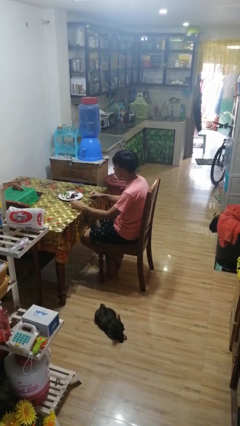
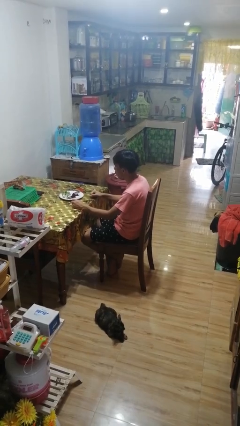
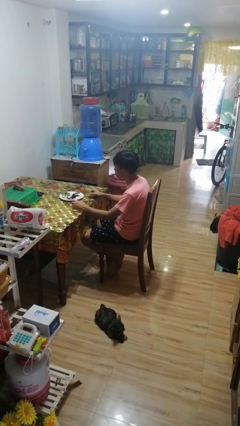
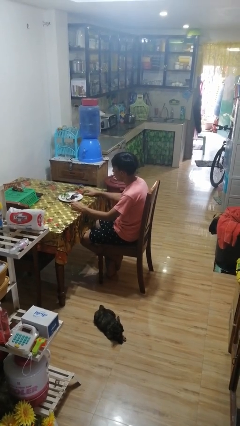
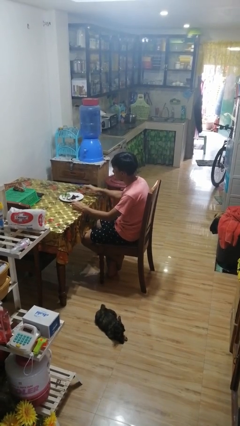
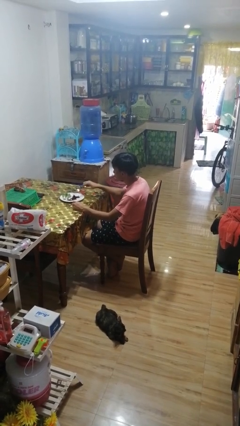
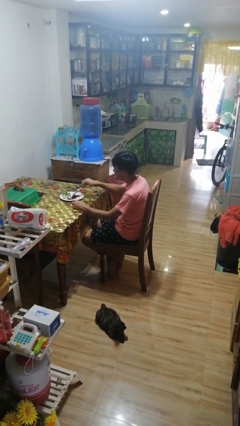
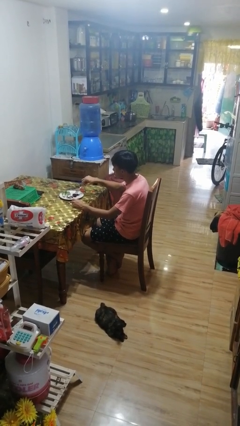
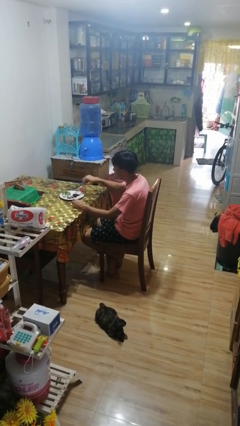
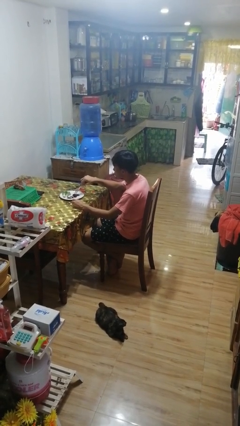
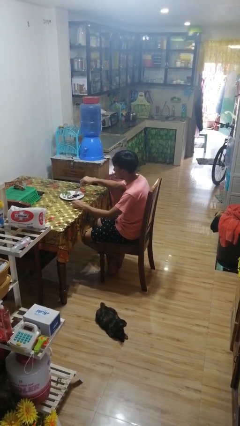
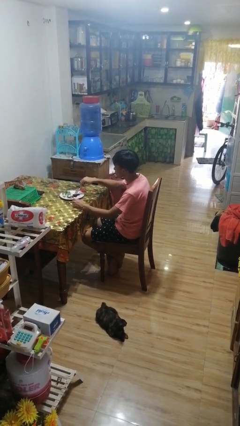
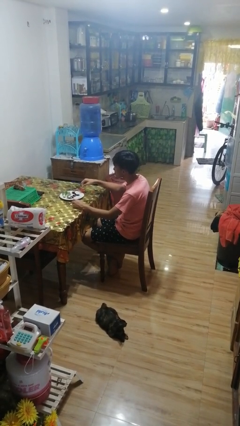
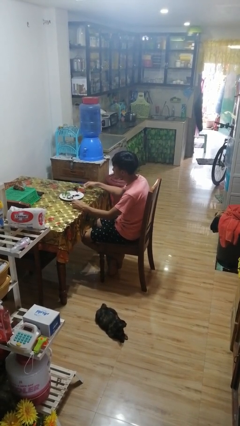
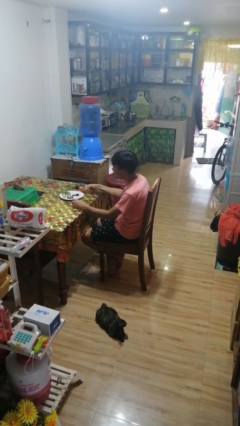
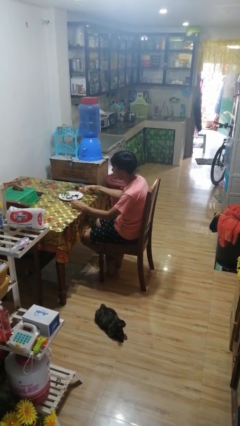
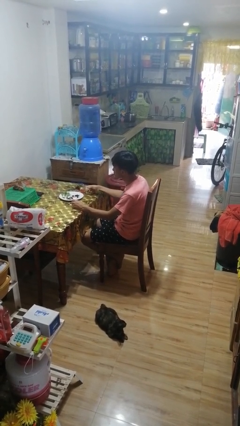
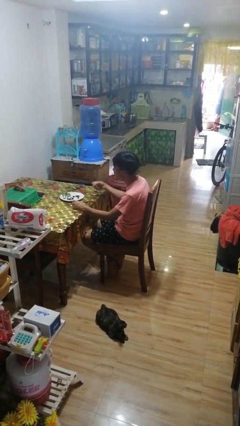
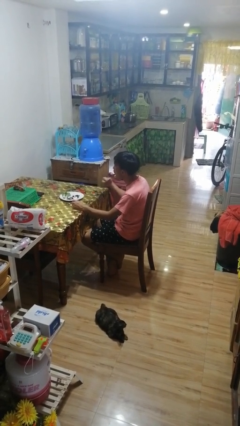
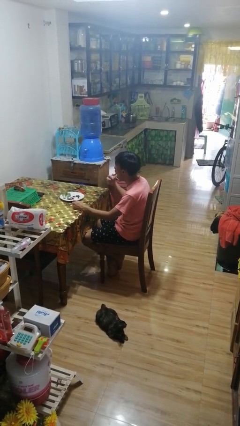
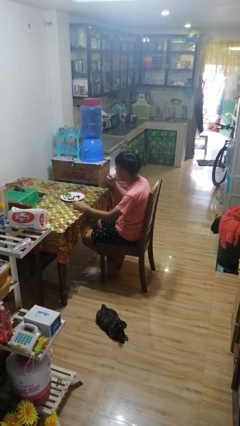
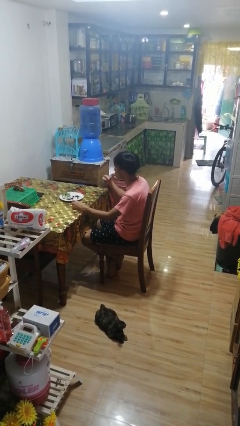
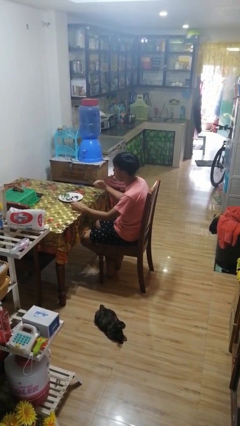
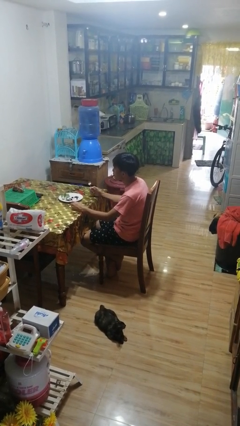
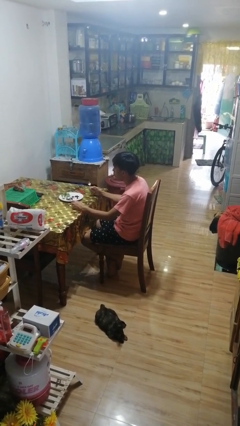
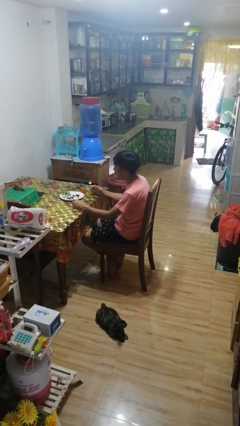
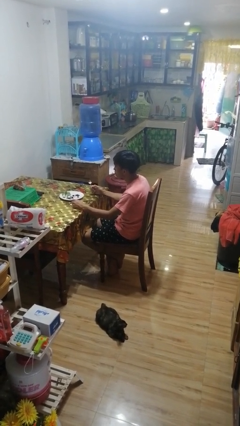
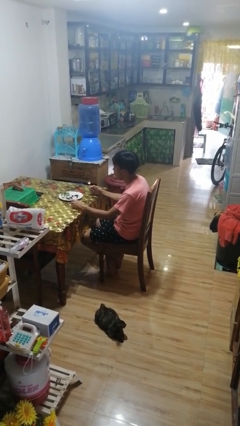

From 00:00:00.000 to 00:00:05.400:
person eats with utensil

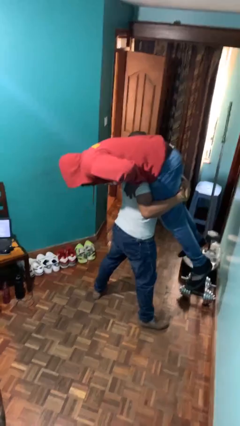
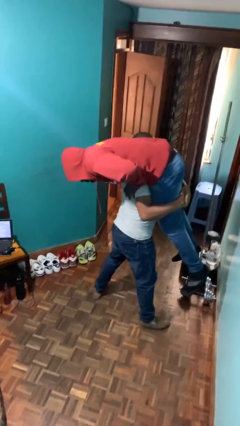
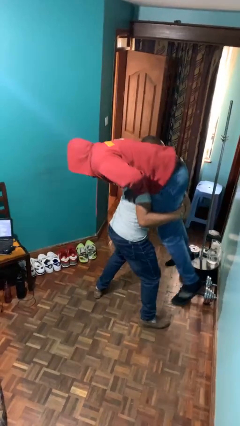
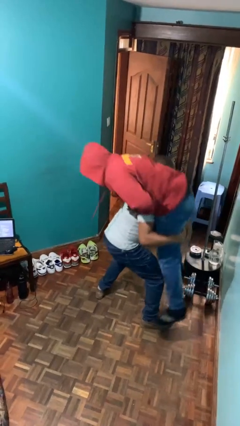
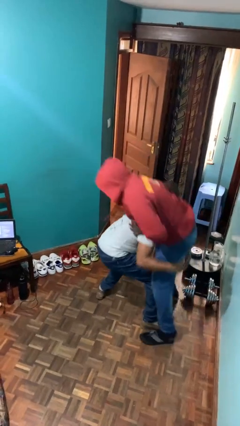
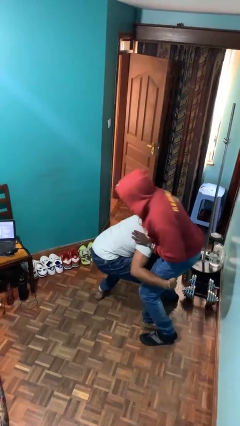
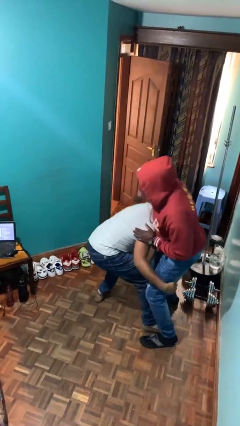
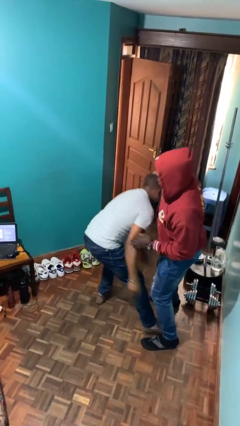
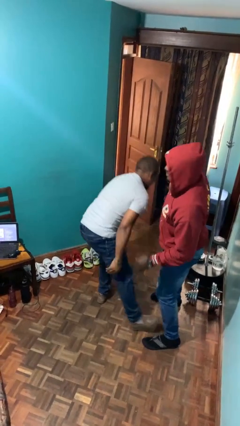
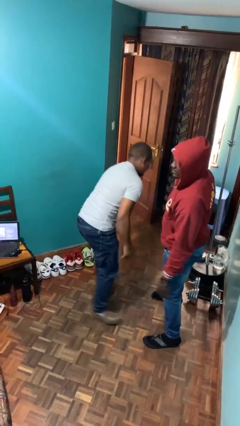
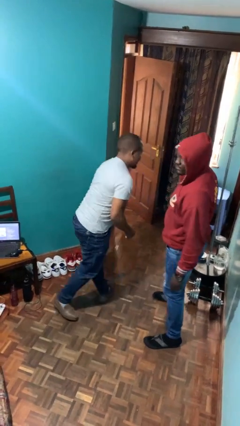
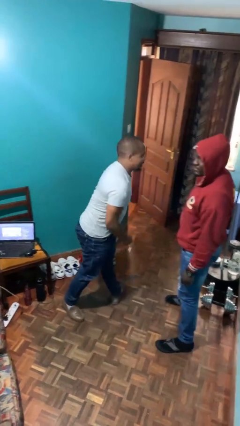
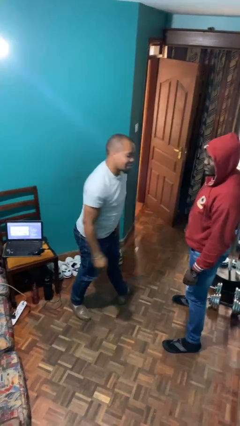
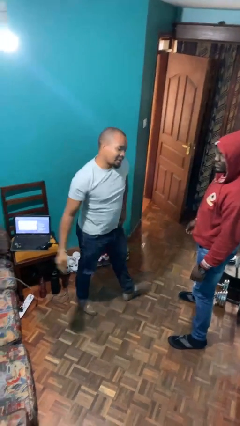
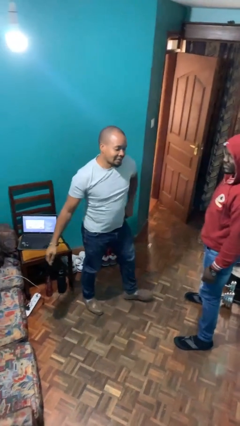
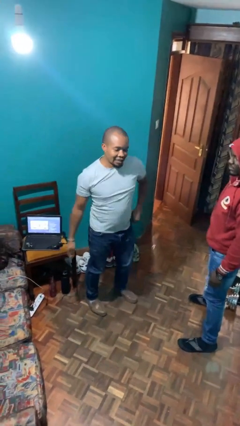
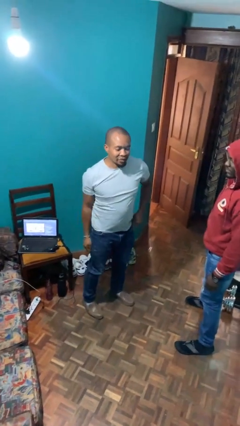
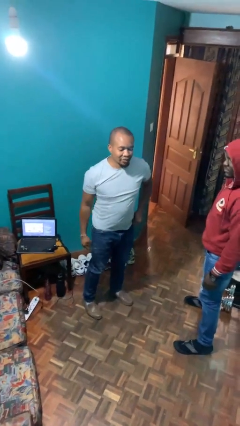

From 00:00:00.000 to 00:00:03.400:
person puts down person

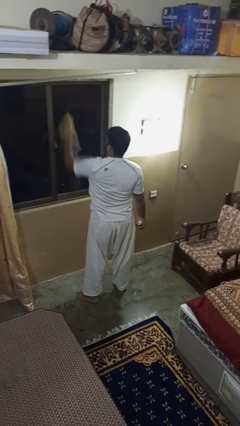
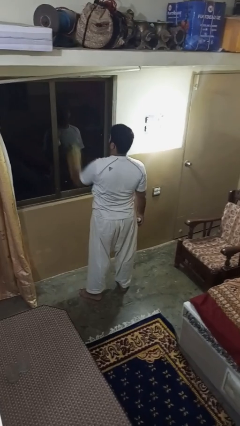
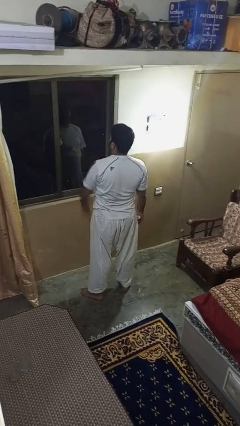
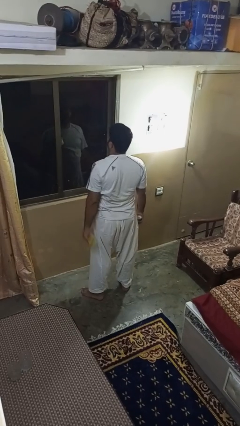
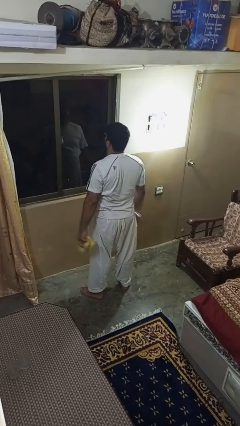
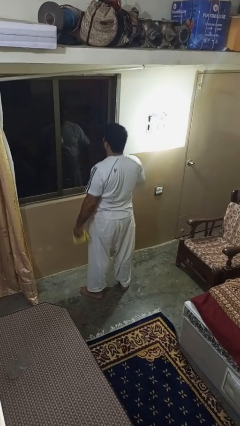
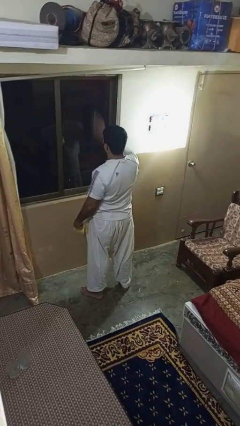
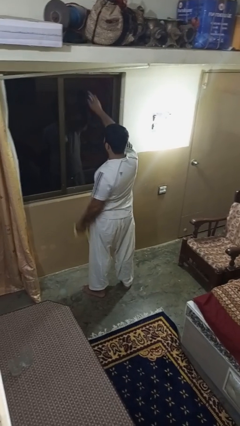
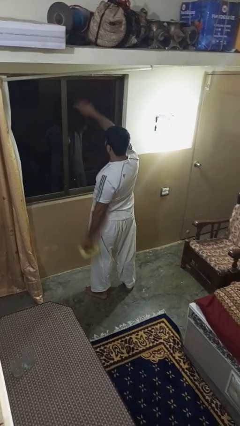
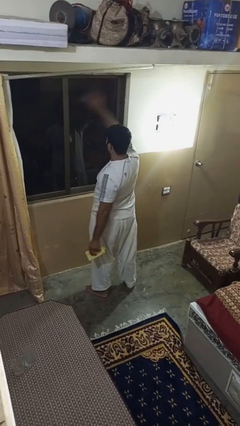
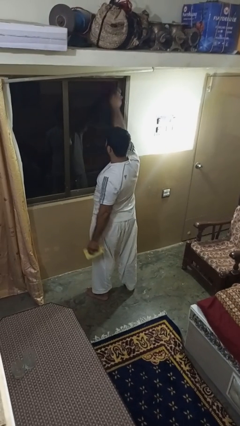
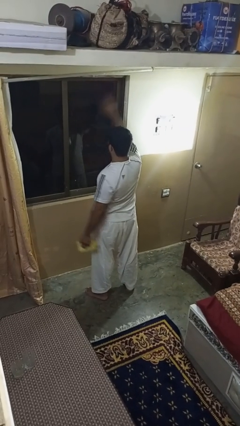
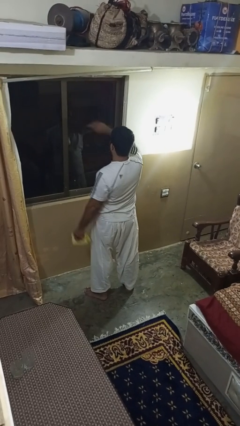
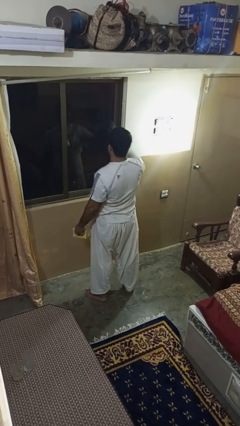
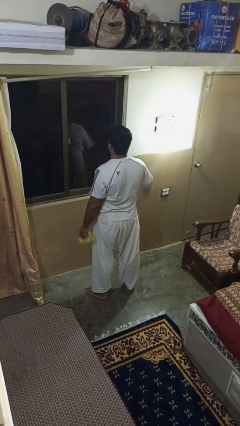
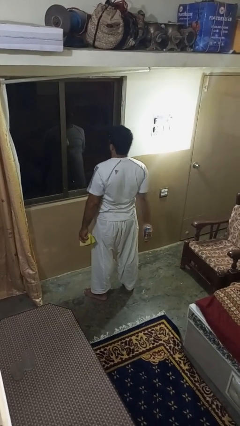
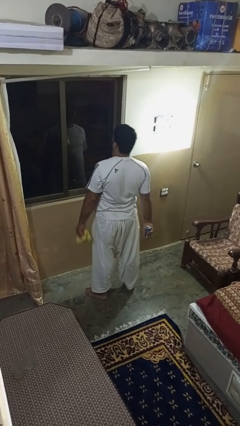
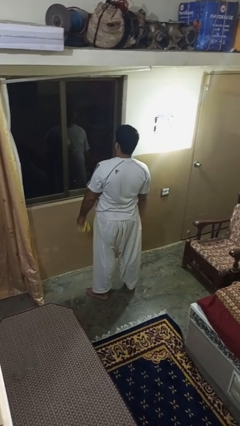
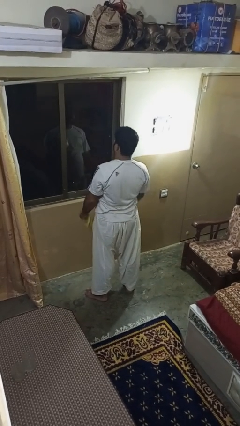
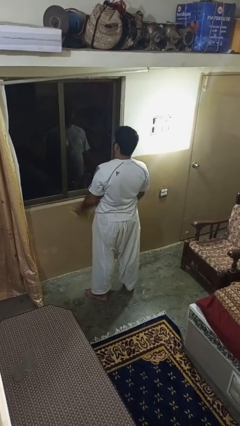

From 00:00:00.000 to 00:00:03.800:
person sprays from bottle

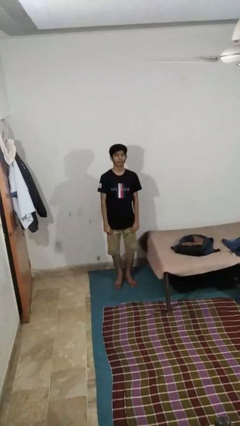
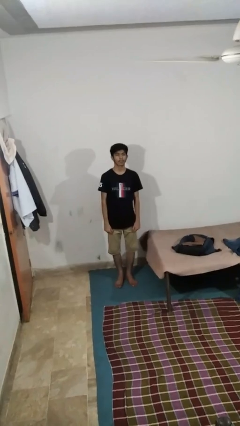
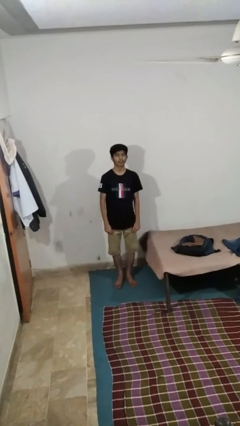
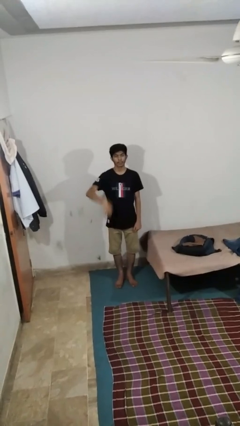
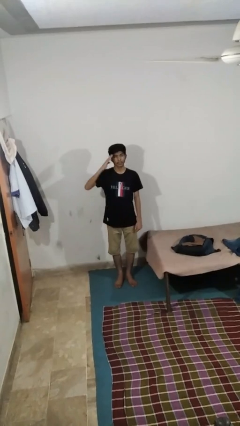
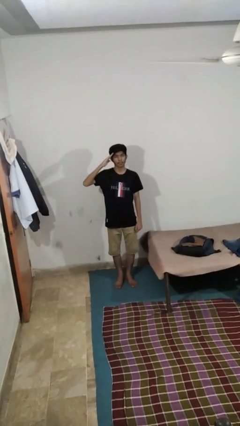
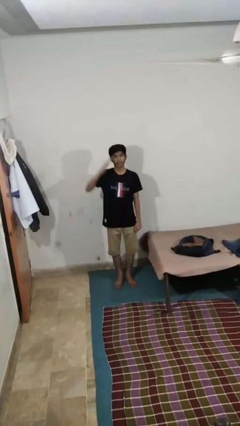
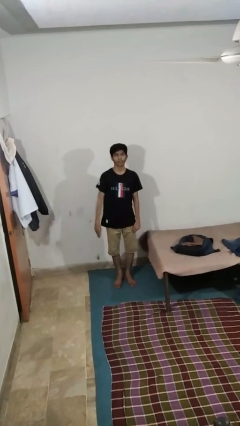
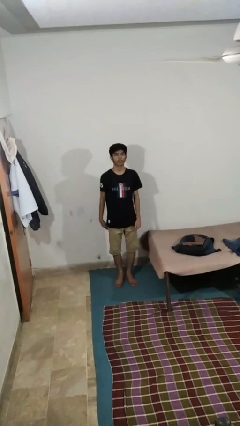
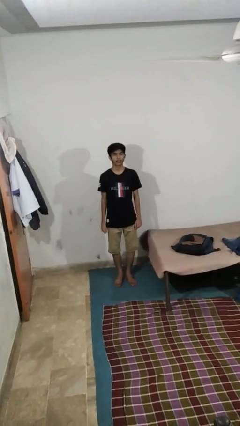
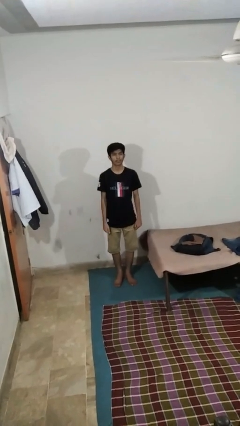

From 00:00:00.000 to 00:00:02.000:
person salutes

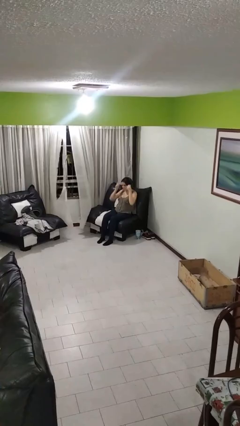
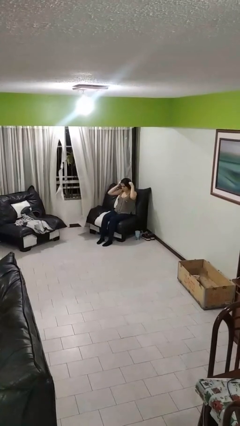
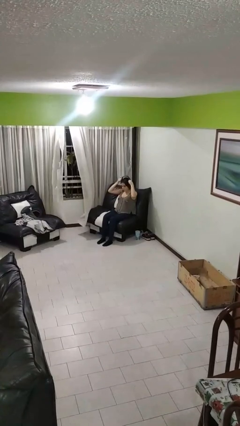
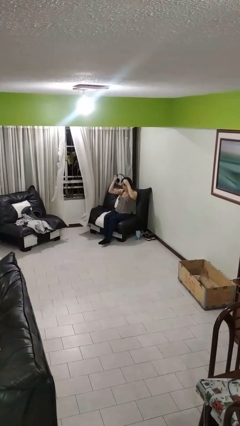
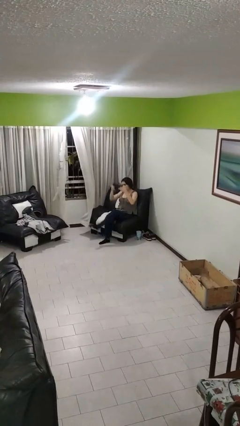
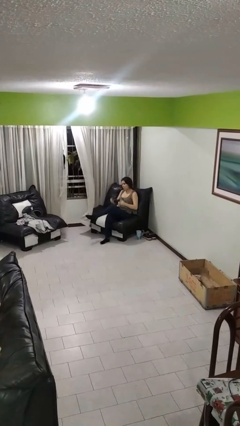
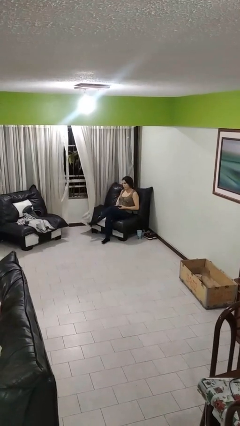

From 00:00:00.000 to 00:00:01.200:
person takes off headphones

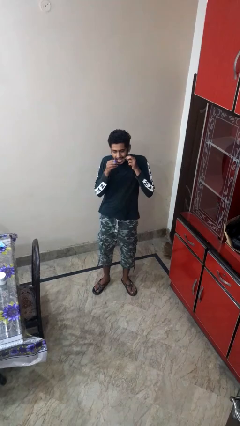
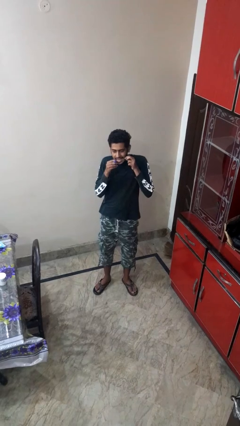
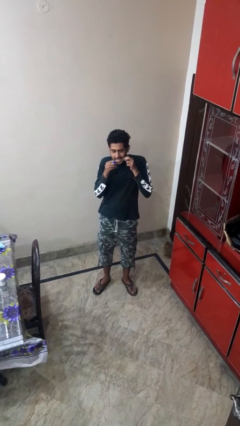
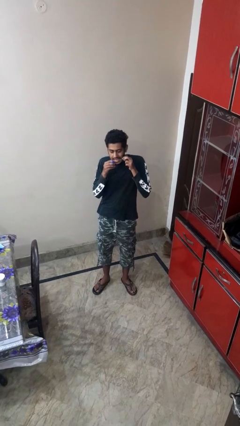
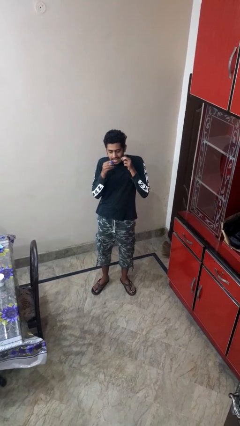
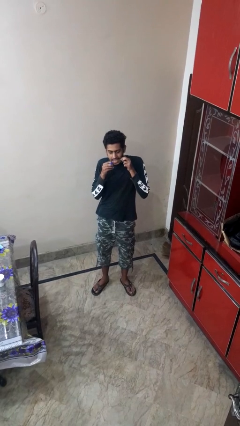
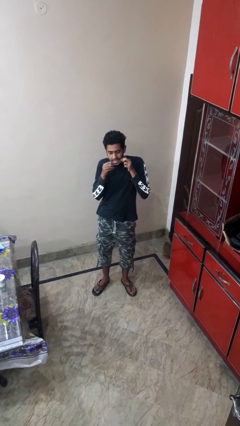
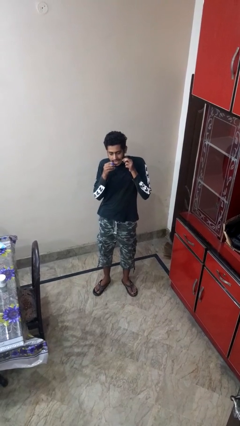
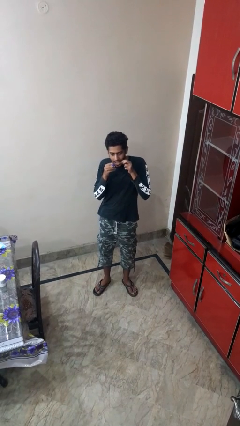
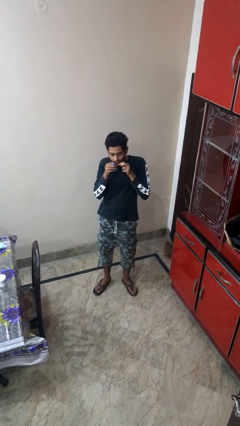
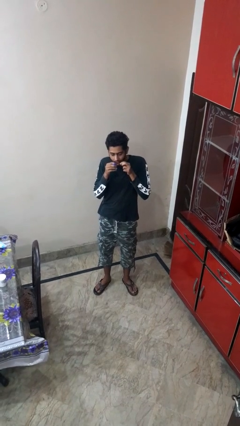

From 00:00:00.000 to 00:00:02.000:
person flosses
